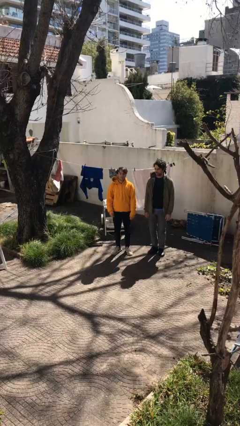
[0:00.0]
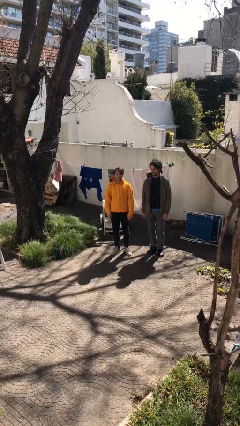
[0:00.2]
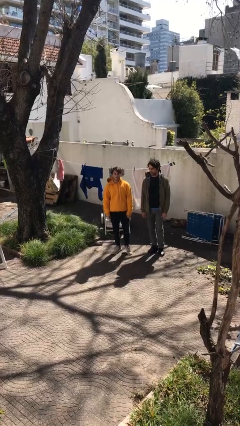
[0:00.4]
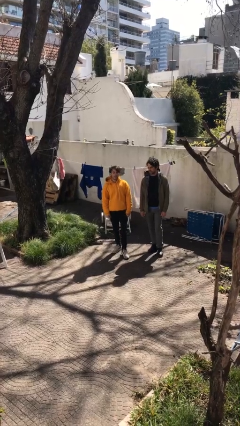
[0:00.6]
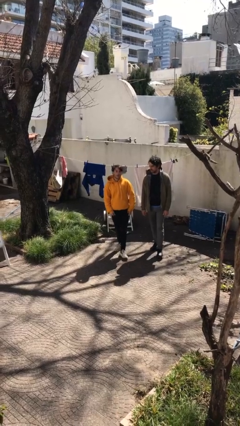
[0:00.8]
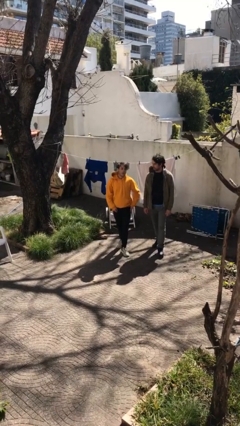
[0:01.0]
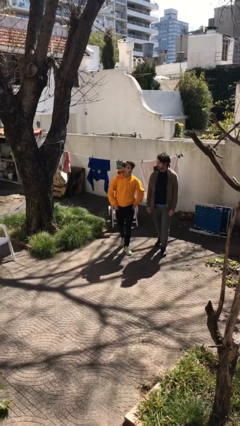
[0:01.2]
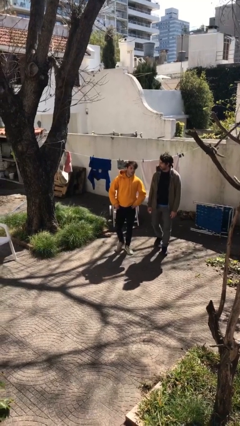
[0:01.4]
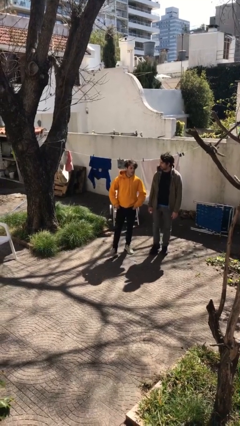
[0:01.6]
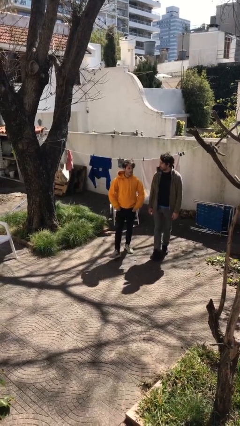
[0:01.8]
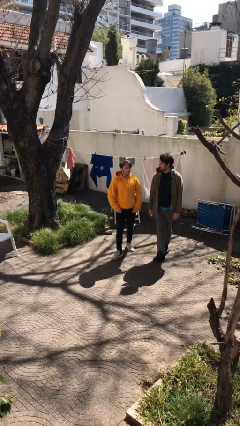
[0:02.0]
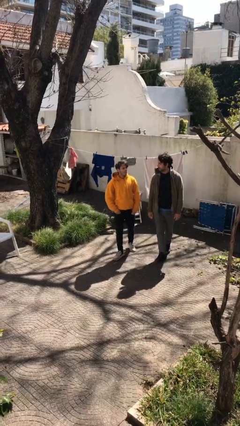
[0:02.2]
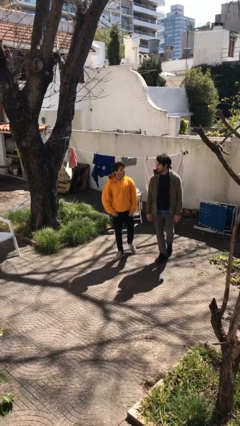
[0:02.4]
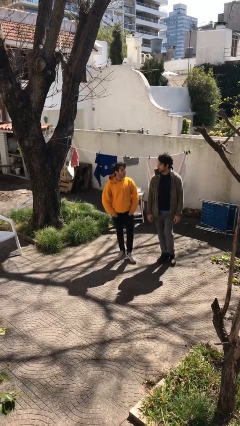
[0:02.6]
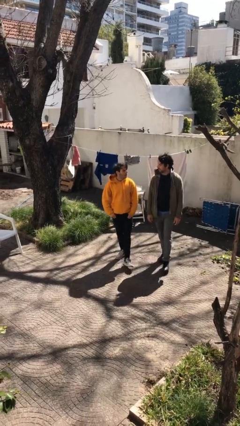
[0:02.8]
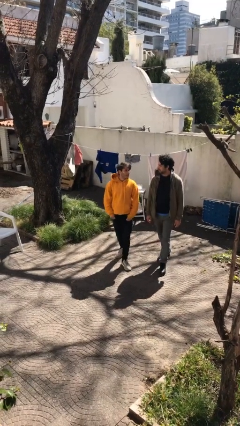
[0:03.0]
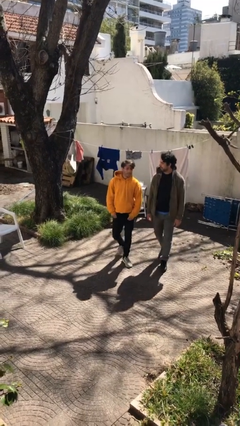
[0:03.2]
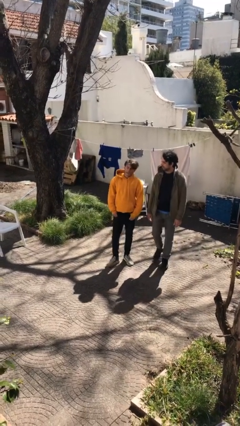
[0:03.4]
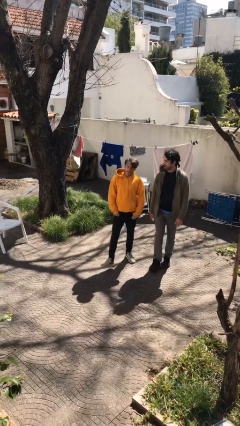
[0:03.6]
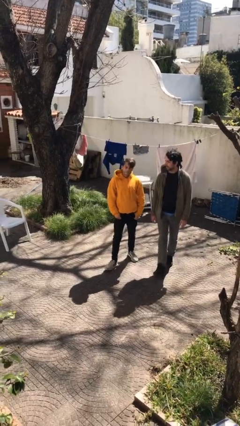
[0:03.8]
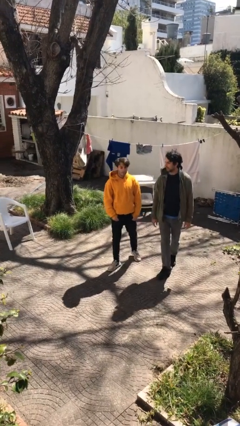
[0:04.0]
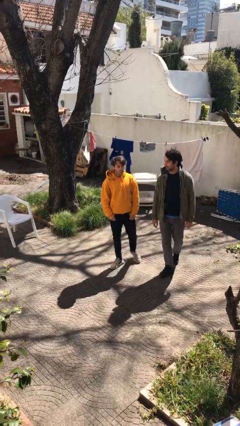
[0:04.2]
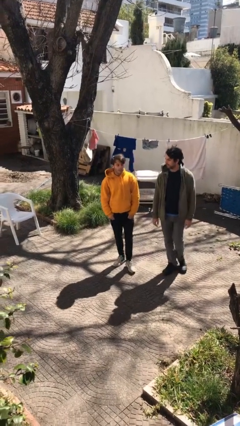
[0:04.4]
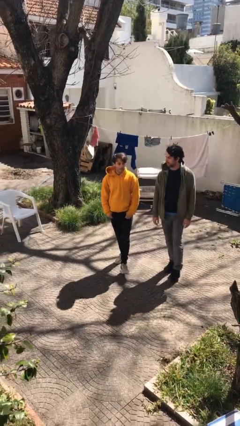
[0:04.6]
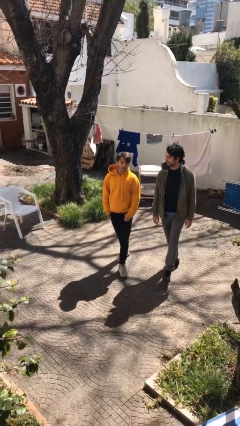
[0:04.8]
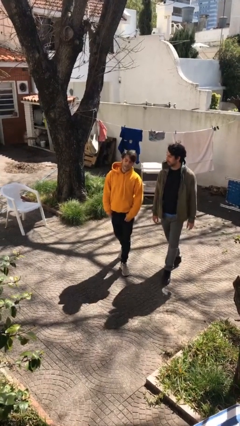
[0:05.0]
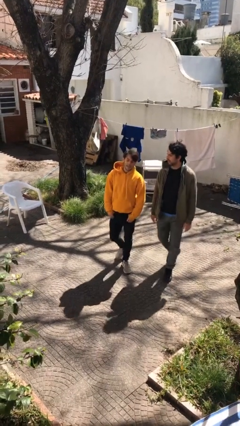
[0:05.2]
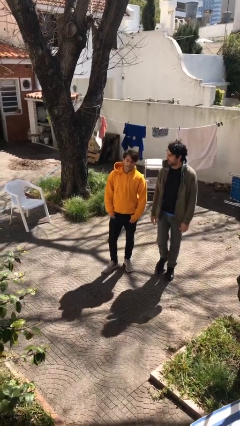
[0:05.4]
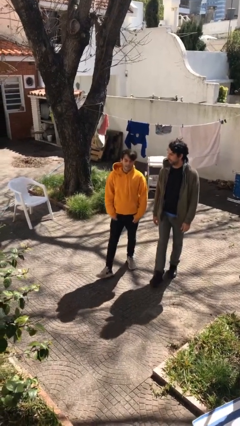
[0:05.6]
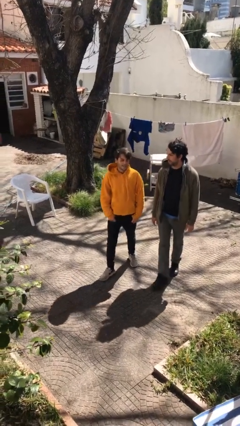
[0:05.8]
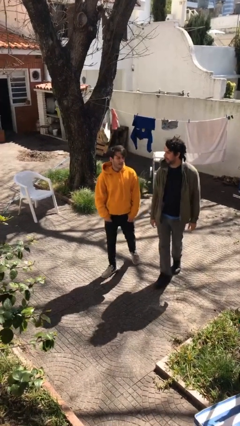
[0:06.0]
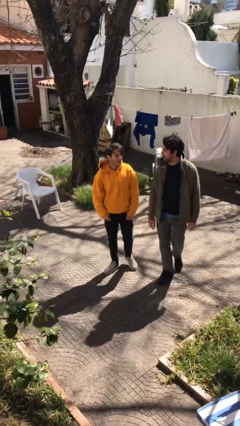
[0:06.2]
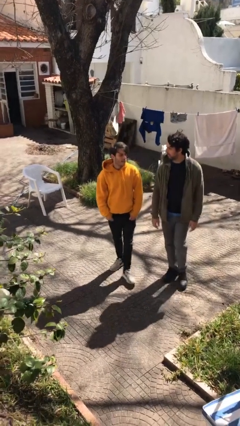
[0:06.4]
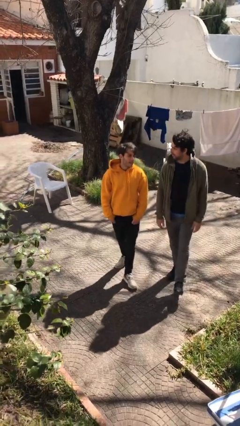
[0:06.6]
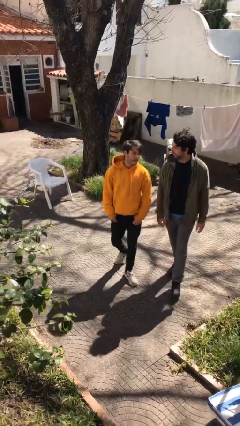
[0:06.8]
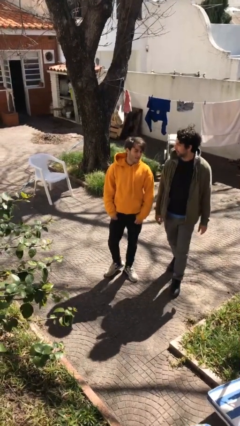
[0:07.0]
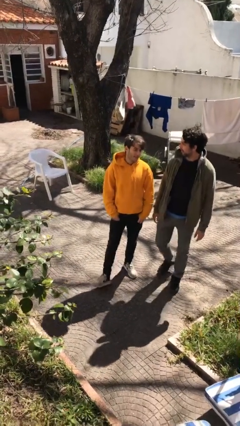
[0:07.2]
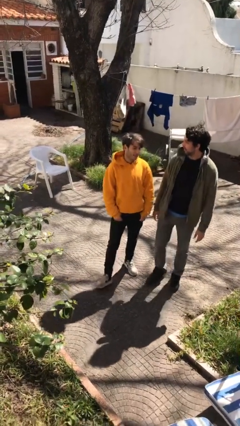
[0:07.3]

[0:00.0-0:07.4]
person talks to person

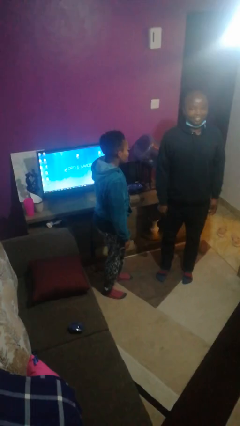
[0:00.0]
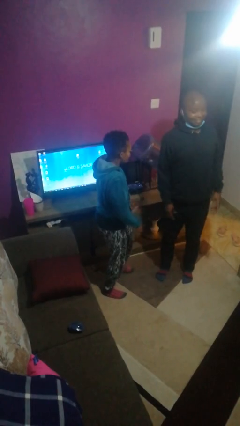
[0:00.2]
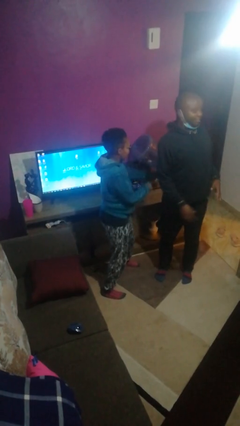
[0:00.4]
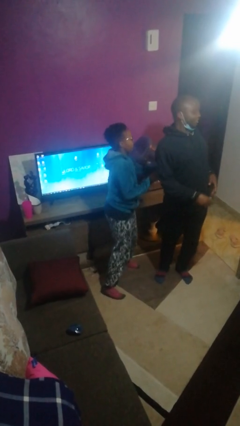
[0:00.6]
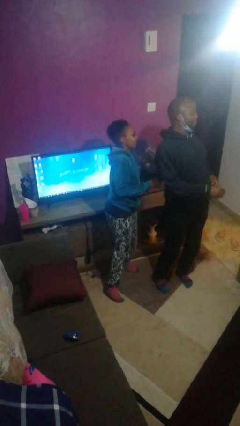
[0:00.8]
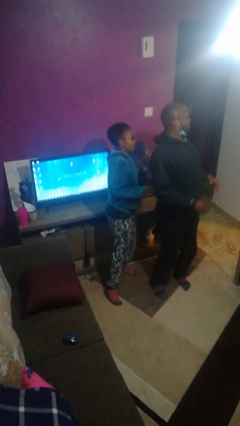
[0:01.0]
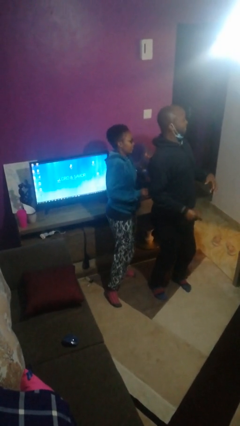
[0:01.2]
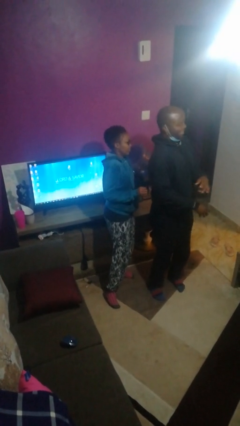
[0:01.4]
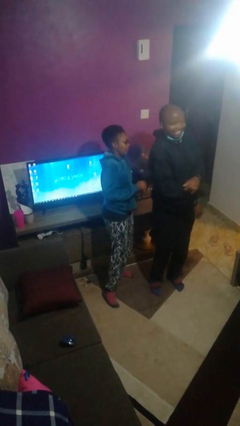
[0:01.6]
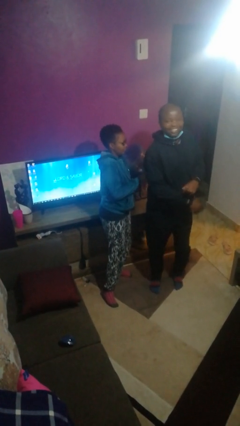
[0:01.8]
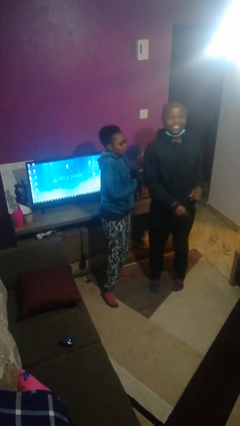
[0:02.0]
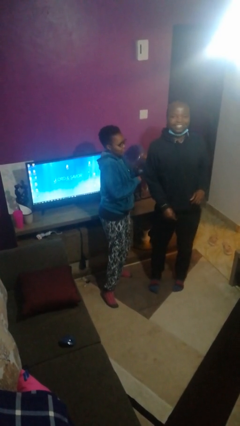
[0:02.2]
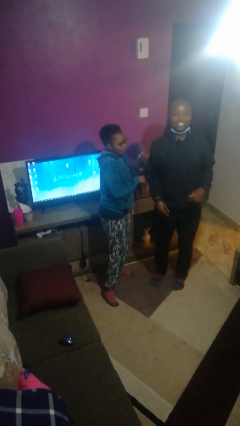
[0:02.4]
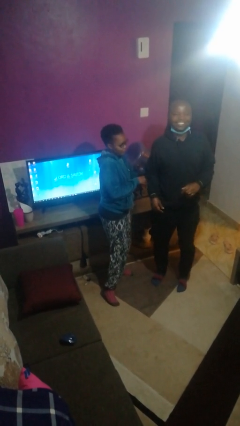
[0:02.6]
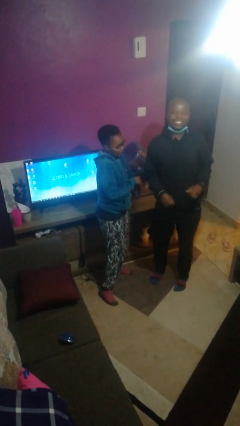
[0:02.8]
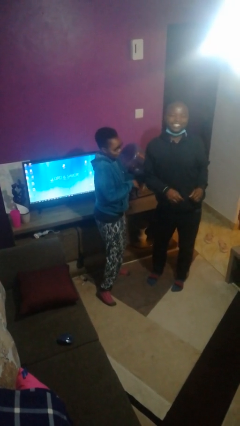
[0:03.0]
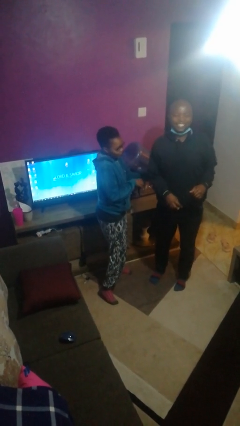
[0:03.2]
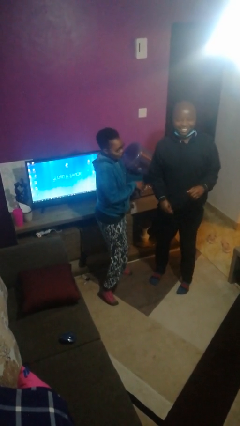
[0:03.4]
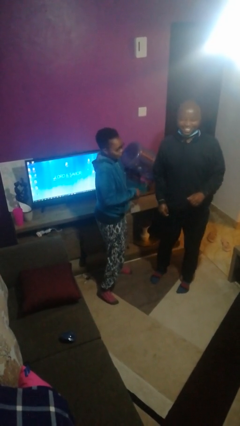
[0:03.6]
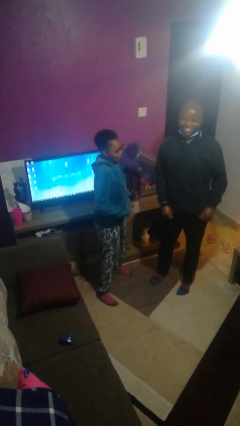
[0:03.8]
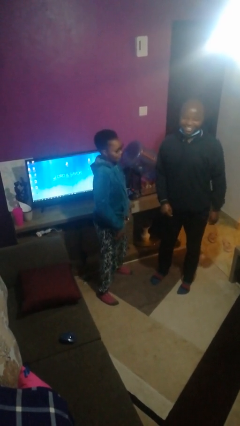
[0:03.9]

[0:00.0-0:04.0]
person tickles person

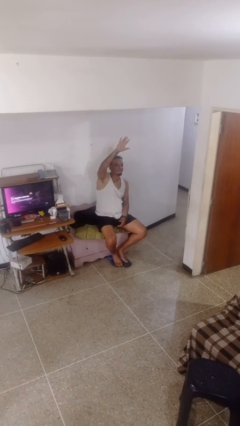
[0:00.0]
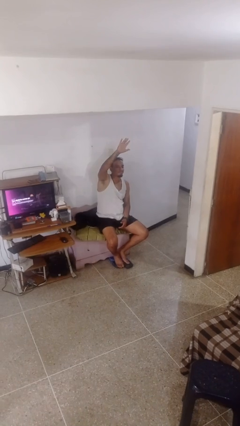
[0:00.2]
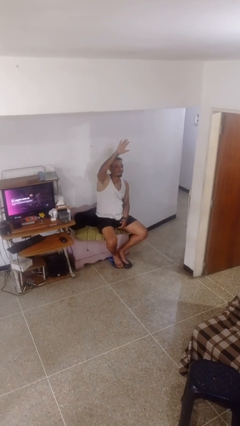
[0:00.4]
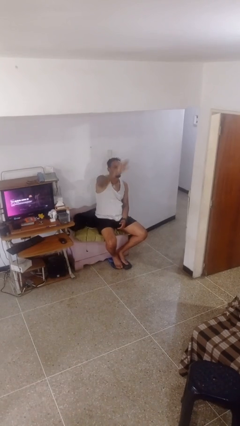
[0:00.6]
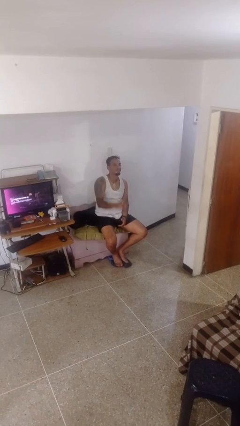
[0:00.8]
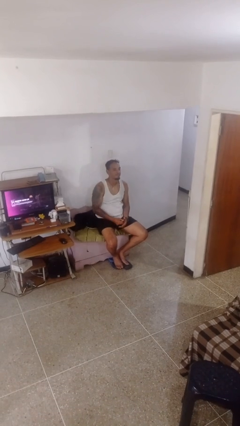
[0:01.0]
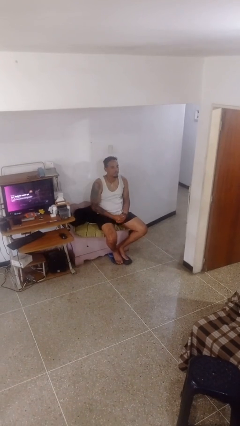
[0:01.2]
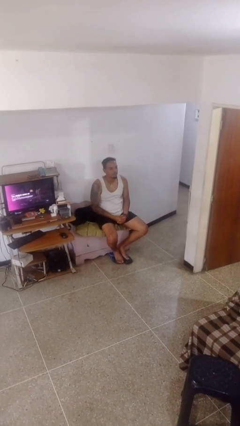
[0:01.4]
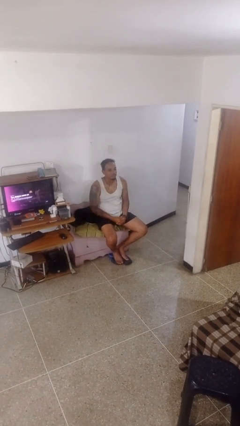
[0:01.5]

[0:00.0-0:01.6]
person gestures lower hand

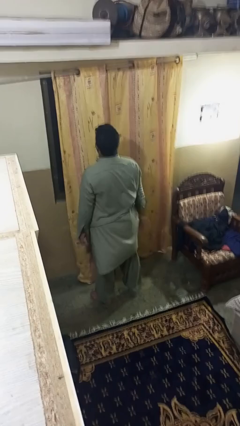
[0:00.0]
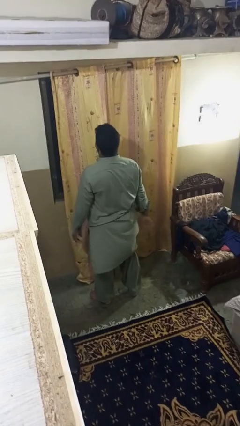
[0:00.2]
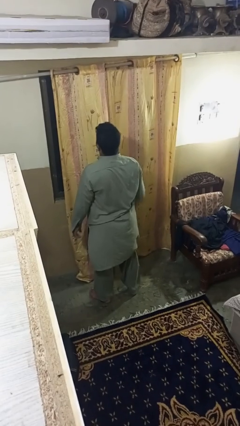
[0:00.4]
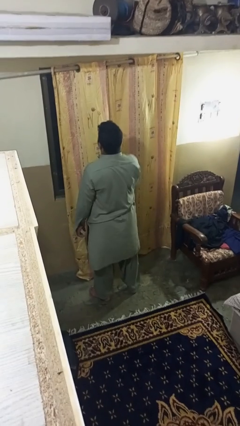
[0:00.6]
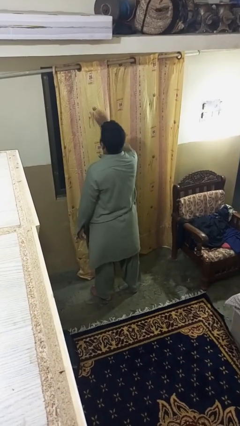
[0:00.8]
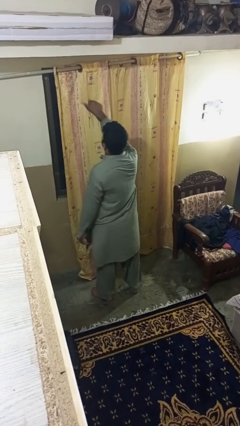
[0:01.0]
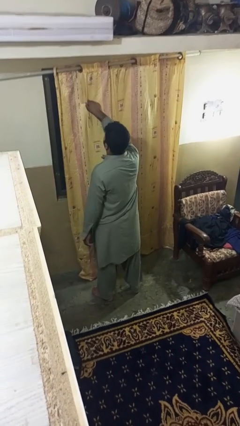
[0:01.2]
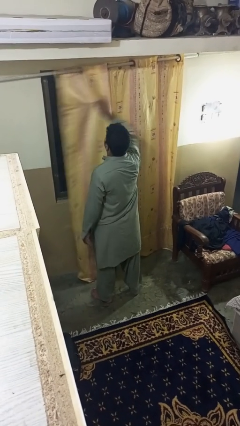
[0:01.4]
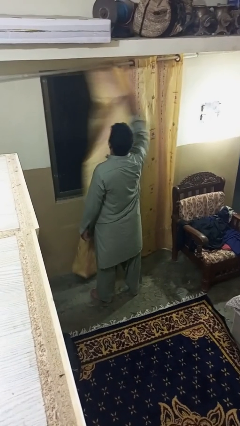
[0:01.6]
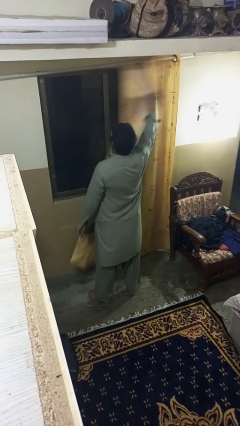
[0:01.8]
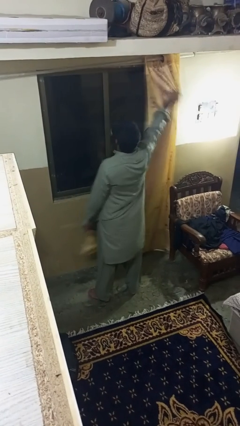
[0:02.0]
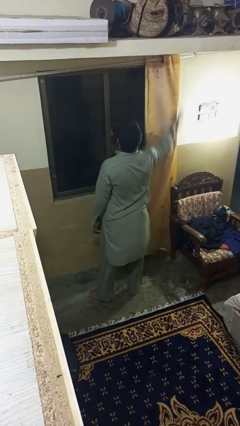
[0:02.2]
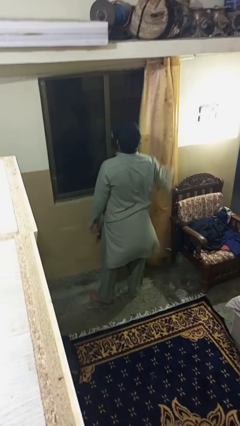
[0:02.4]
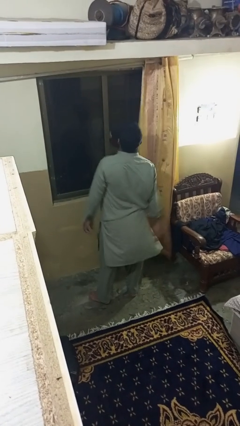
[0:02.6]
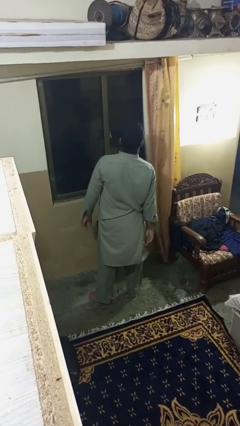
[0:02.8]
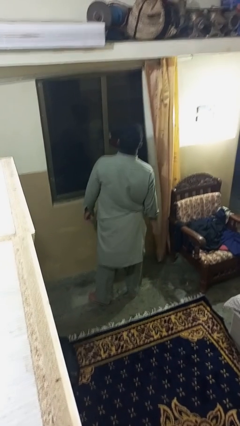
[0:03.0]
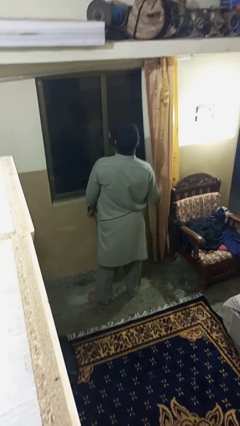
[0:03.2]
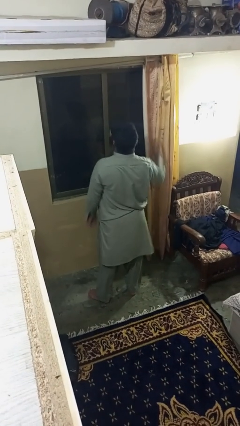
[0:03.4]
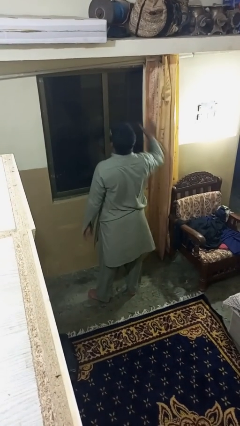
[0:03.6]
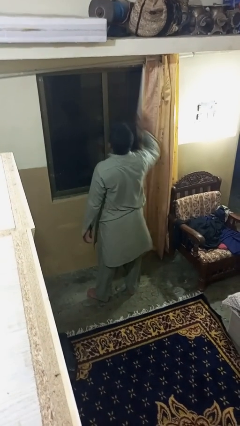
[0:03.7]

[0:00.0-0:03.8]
person opens curtains

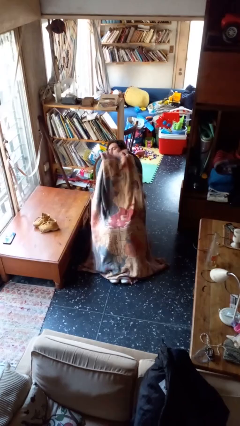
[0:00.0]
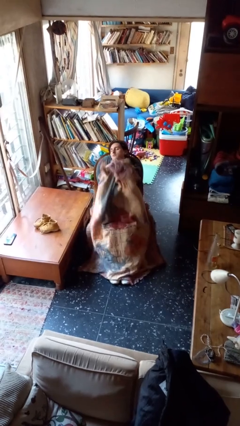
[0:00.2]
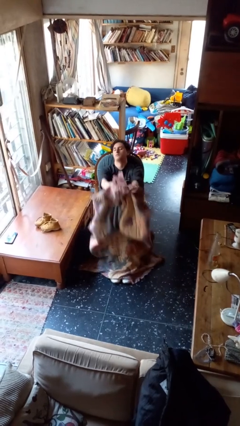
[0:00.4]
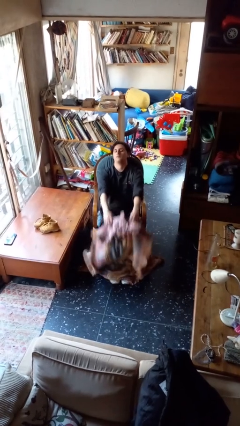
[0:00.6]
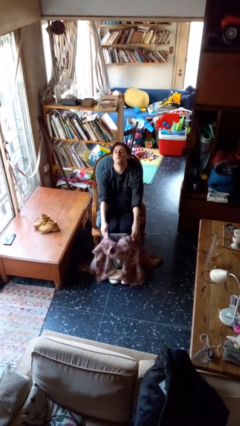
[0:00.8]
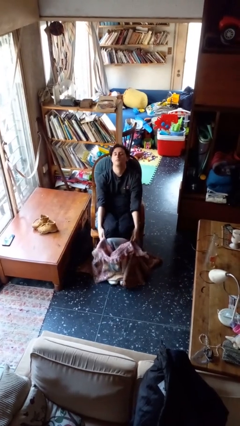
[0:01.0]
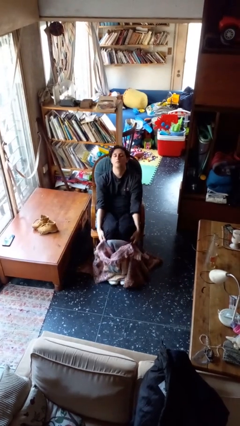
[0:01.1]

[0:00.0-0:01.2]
person uncovers with blanket
